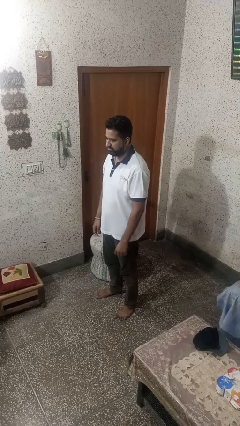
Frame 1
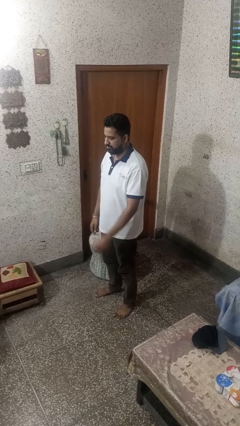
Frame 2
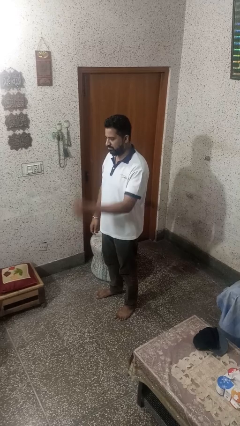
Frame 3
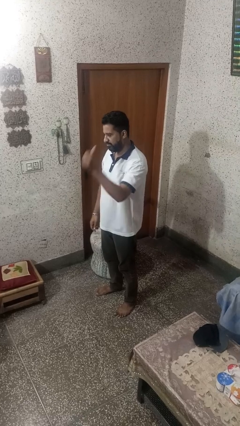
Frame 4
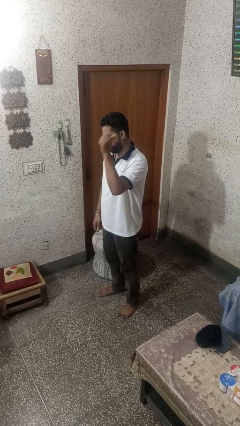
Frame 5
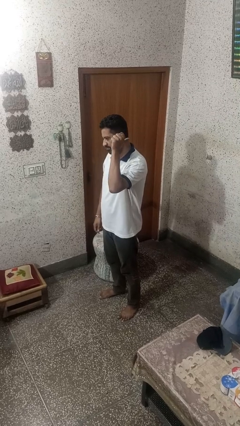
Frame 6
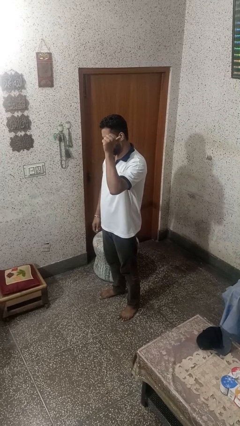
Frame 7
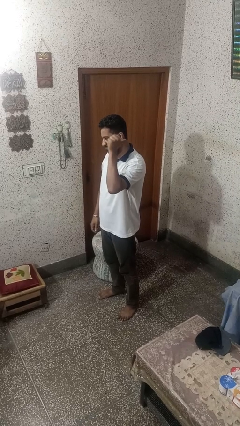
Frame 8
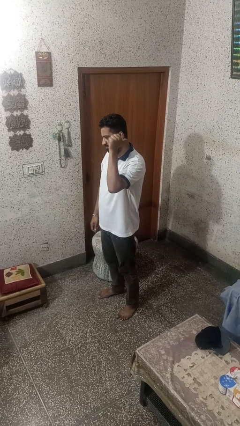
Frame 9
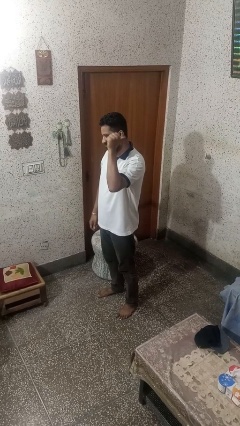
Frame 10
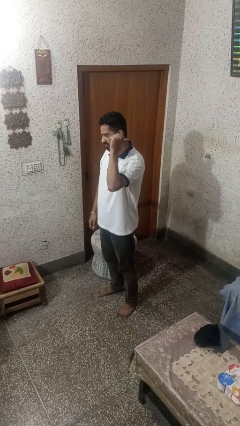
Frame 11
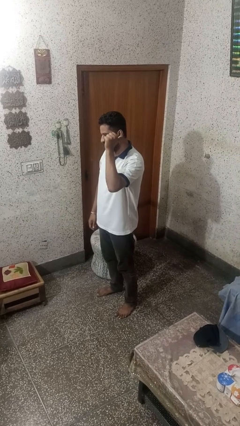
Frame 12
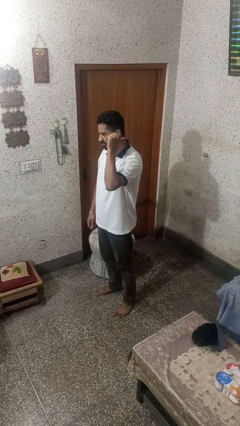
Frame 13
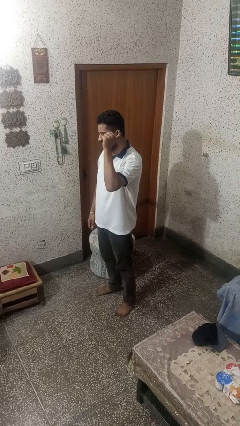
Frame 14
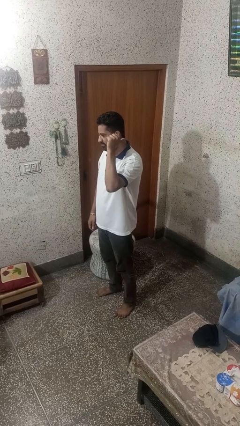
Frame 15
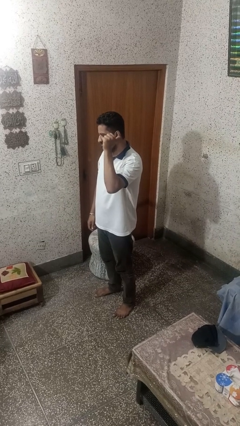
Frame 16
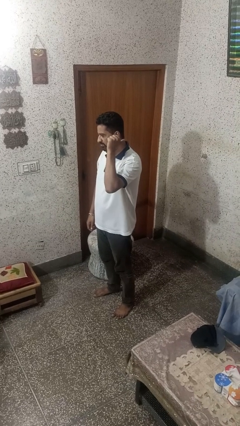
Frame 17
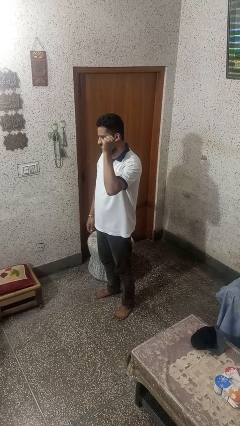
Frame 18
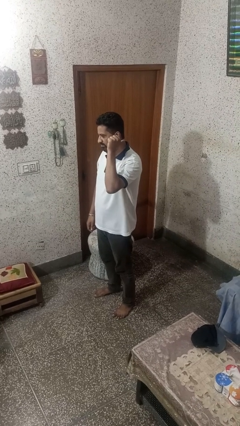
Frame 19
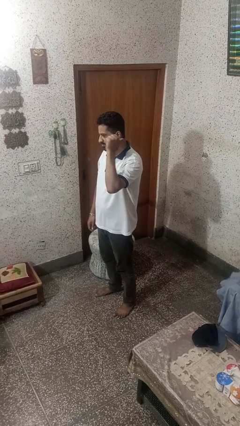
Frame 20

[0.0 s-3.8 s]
person gestures behind me

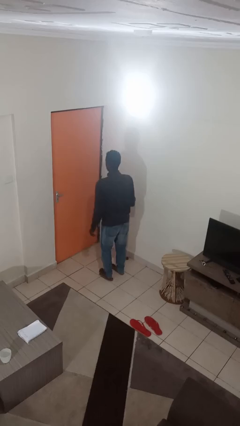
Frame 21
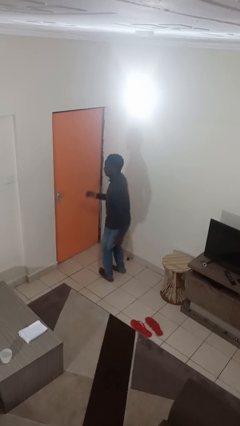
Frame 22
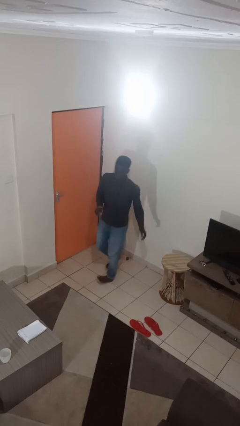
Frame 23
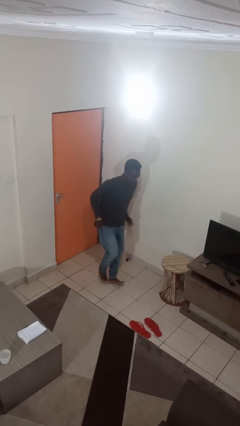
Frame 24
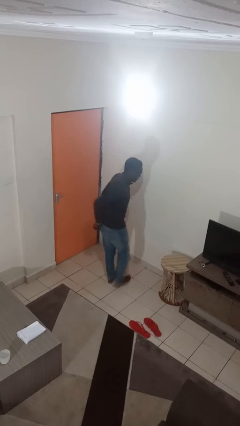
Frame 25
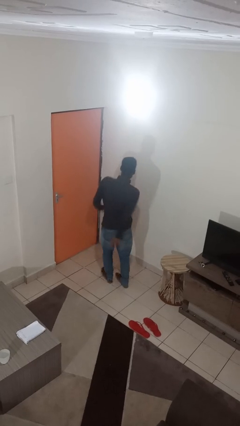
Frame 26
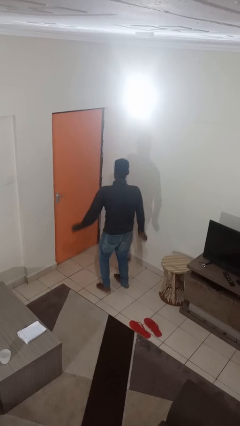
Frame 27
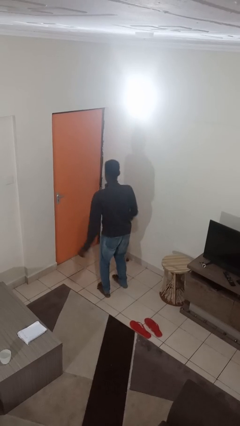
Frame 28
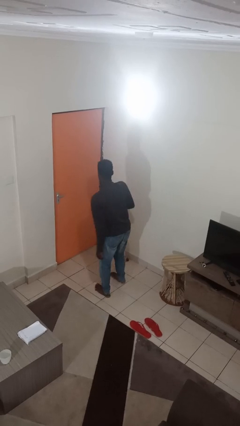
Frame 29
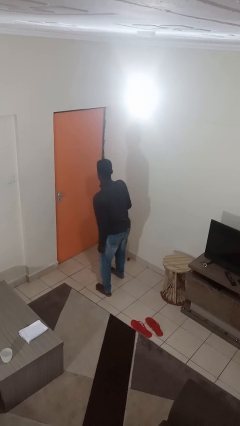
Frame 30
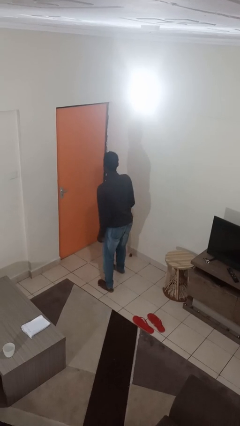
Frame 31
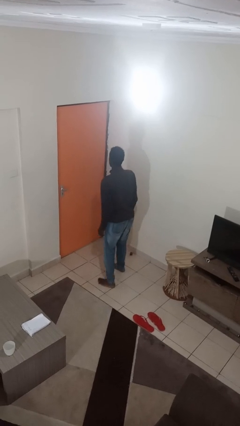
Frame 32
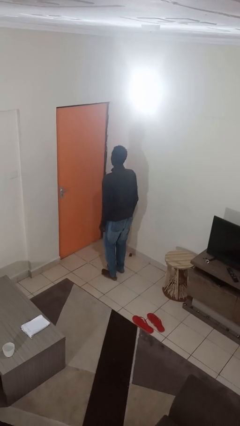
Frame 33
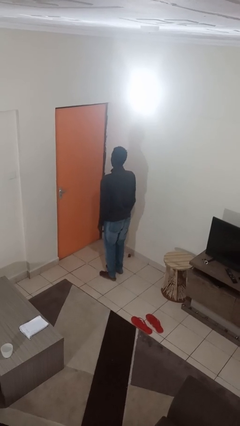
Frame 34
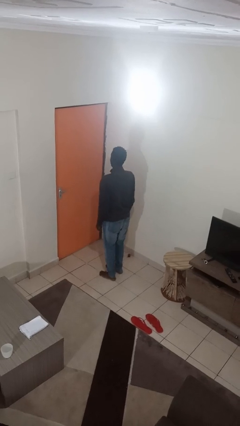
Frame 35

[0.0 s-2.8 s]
person twirls

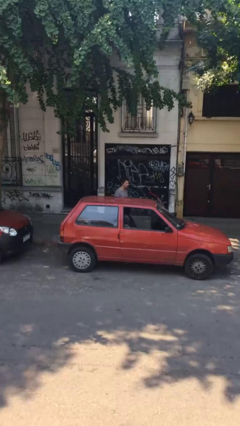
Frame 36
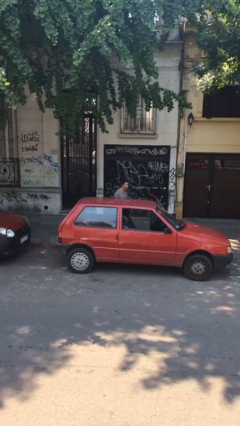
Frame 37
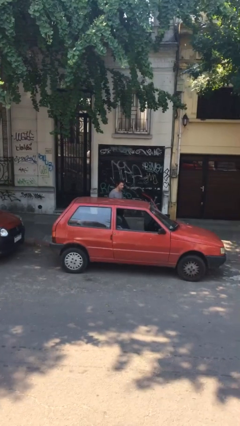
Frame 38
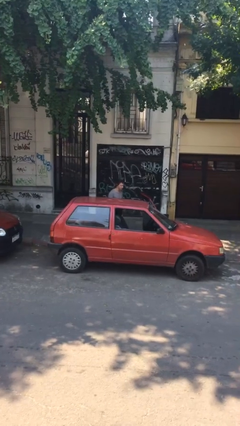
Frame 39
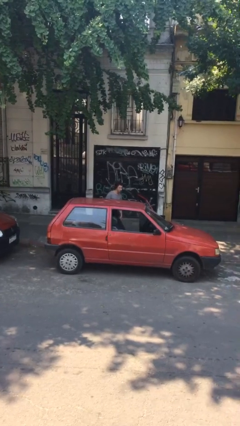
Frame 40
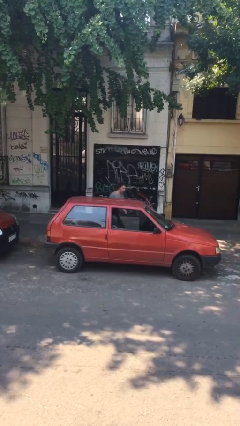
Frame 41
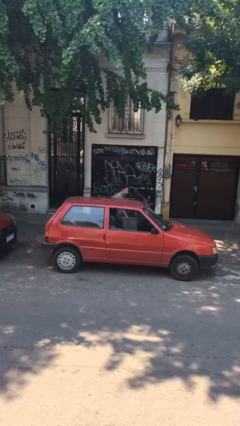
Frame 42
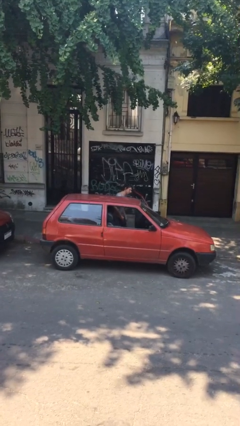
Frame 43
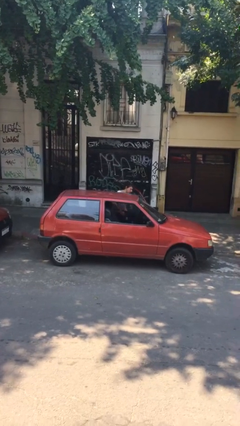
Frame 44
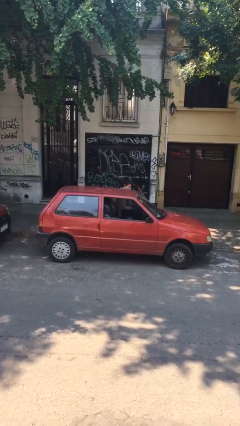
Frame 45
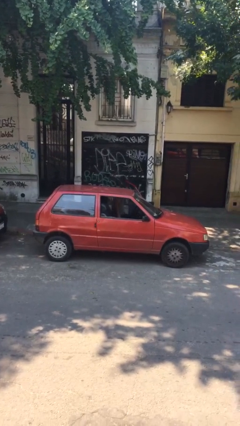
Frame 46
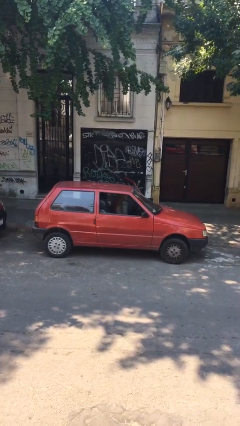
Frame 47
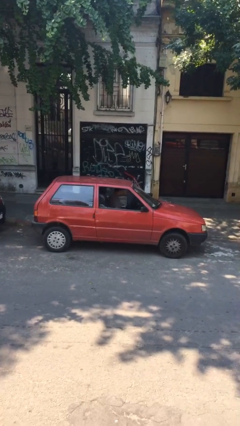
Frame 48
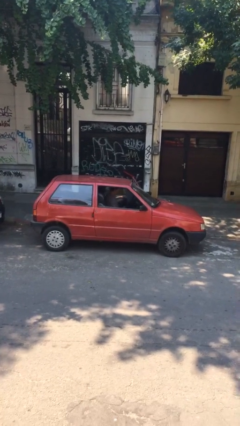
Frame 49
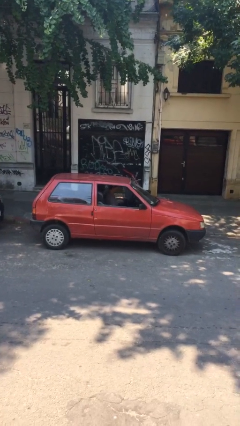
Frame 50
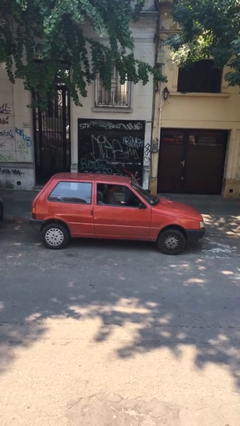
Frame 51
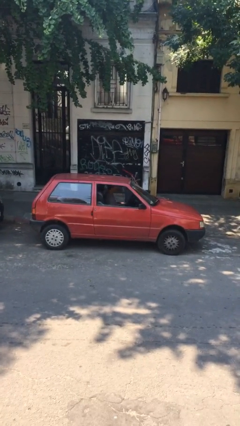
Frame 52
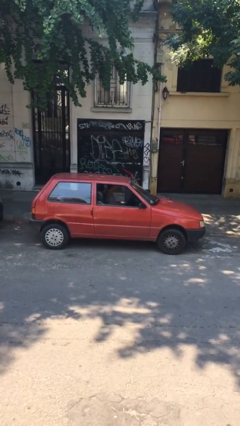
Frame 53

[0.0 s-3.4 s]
person enters car

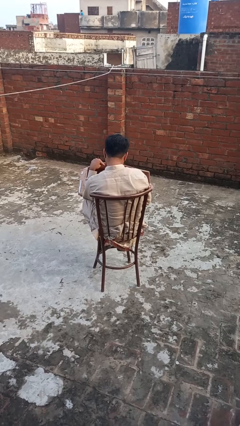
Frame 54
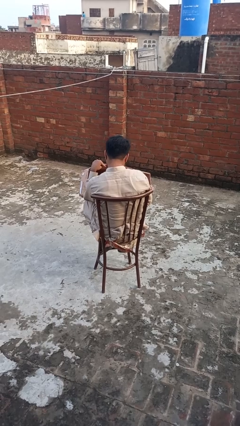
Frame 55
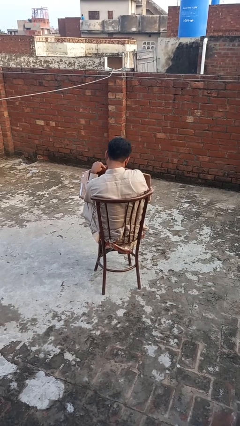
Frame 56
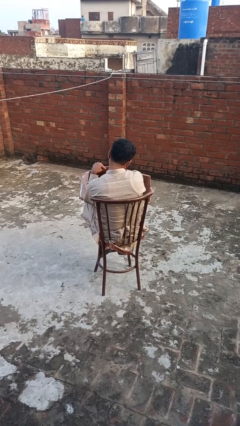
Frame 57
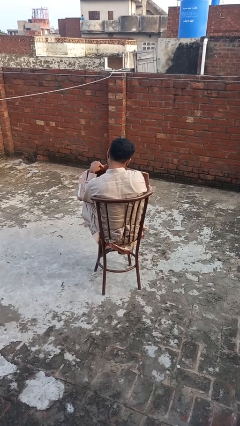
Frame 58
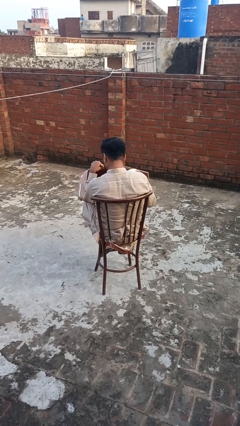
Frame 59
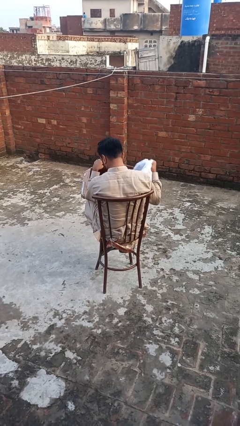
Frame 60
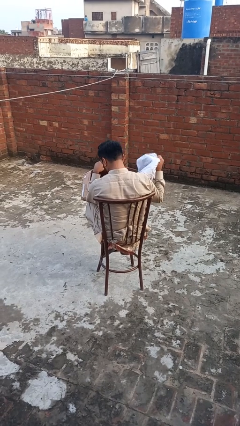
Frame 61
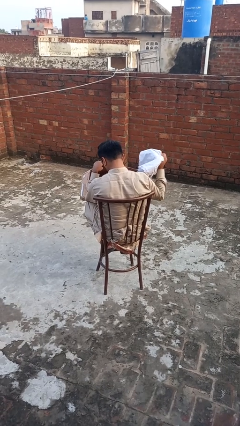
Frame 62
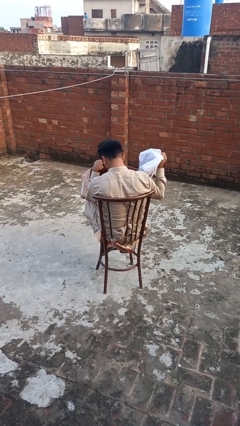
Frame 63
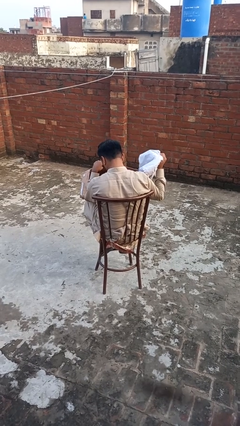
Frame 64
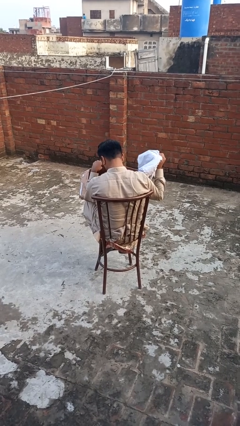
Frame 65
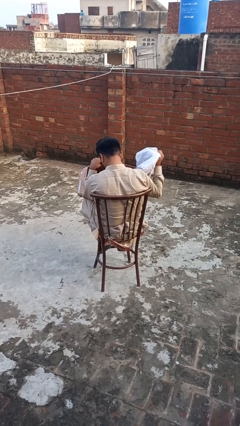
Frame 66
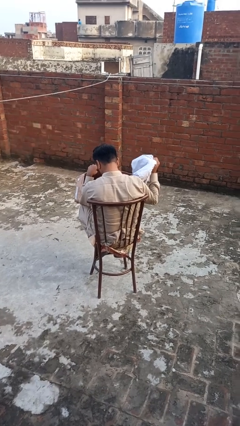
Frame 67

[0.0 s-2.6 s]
person searches in box

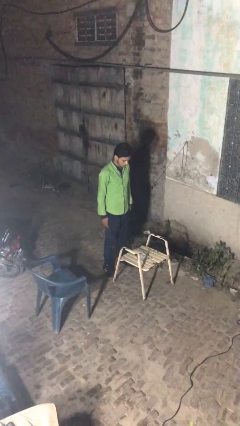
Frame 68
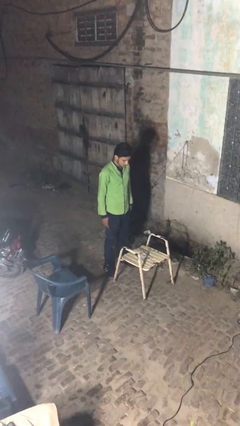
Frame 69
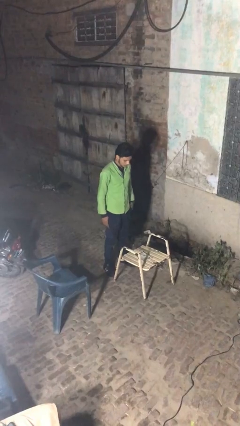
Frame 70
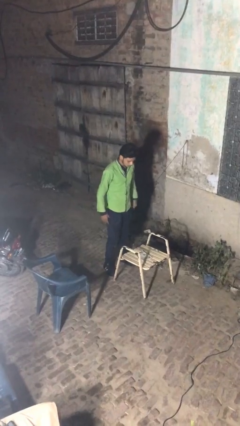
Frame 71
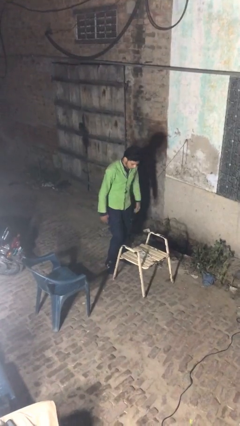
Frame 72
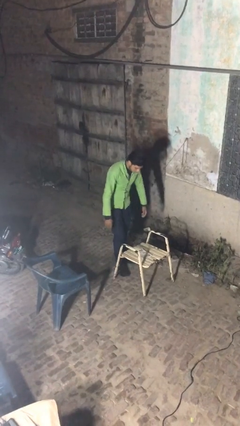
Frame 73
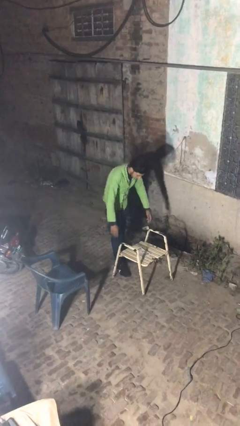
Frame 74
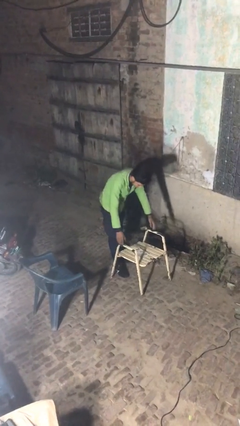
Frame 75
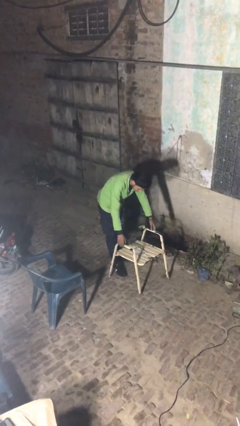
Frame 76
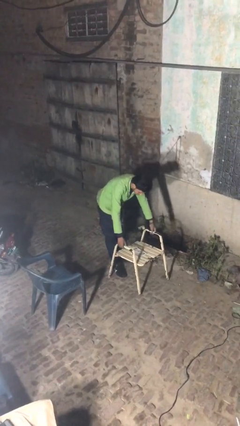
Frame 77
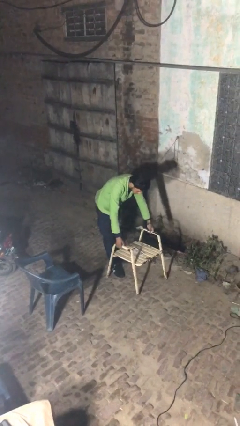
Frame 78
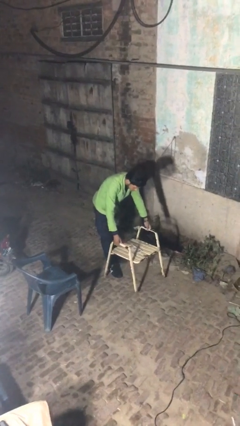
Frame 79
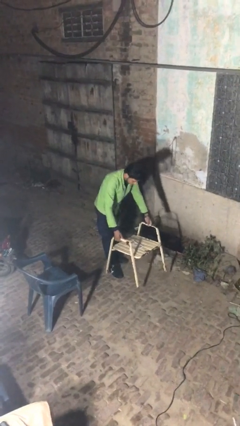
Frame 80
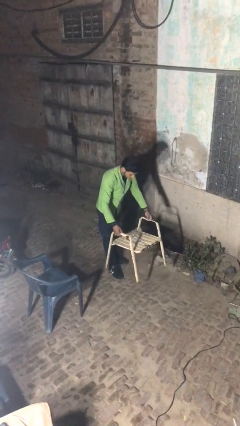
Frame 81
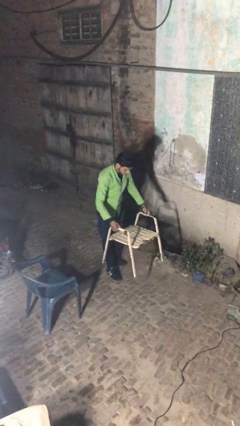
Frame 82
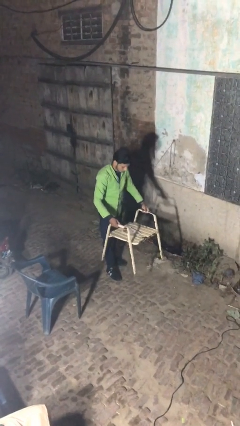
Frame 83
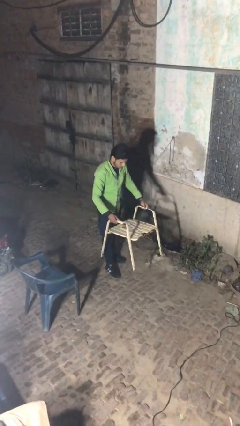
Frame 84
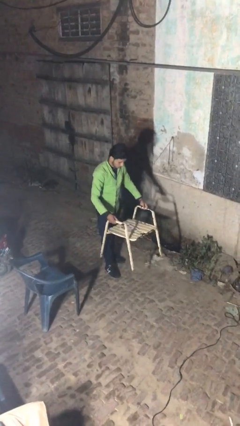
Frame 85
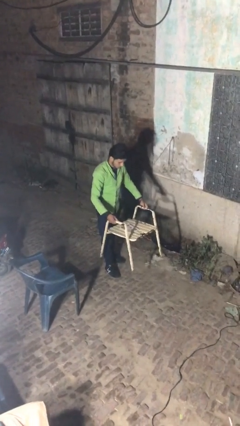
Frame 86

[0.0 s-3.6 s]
person picks up object from floor

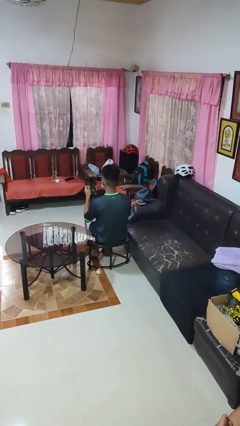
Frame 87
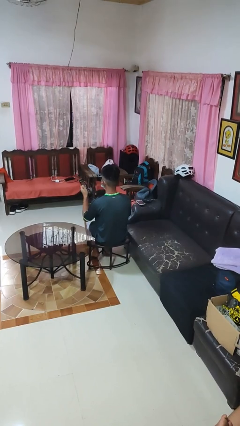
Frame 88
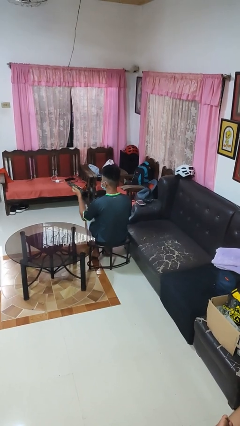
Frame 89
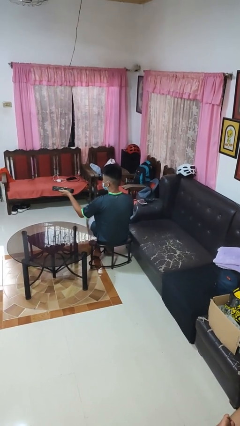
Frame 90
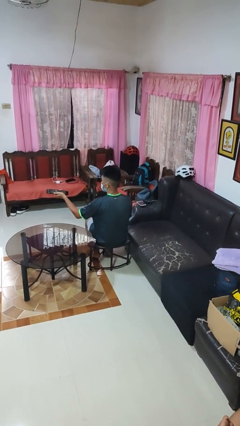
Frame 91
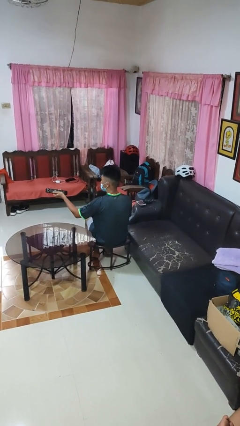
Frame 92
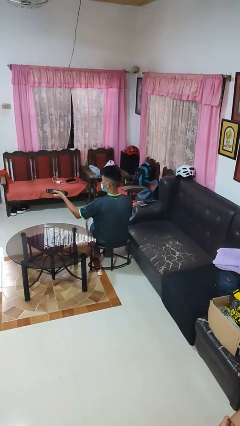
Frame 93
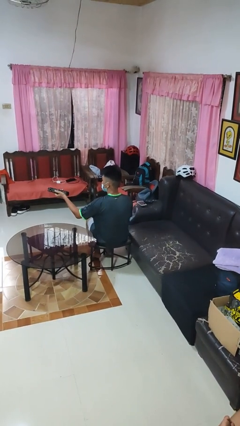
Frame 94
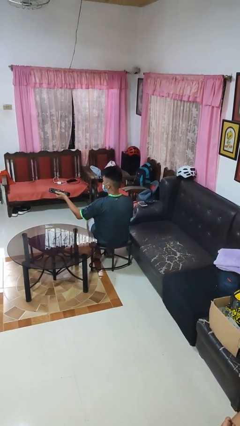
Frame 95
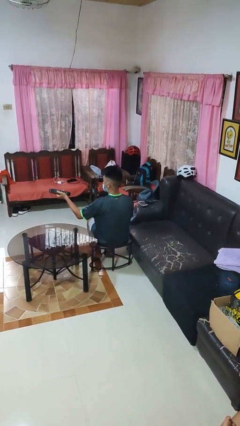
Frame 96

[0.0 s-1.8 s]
person uses television remote
